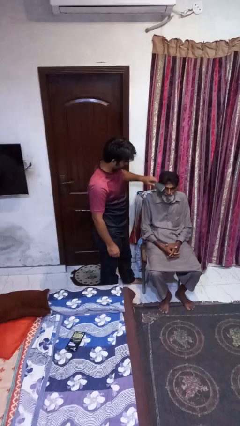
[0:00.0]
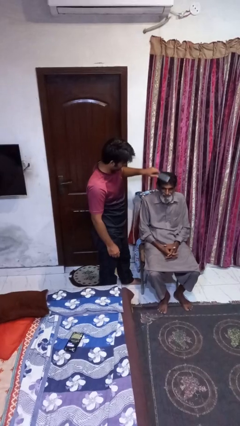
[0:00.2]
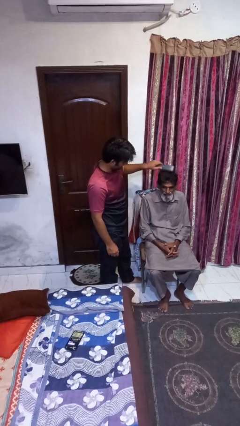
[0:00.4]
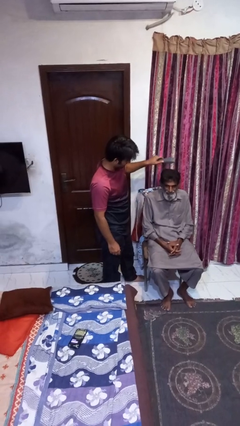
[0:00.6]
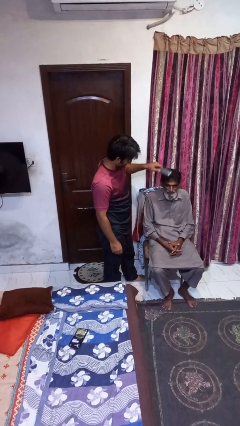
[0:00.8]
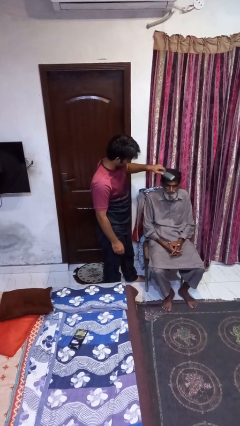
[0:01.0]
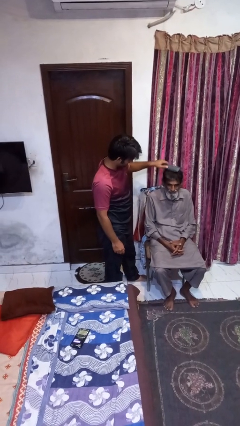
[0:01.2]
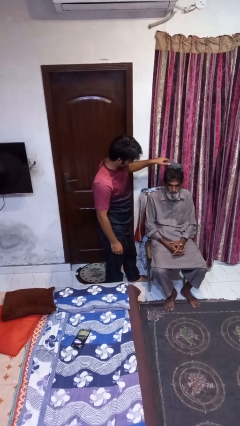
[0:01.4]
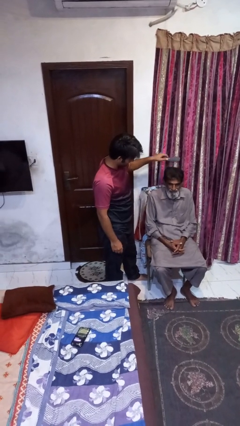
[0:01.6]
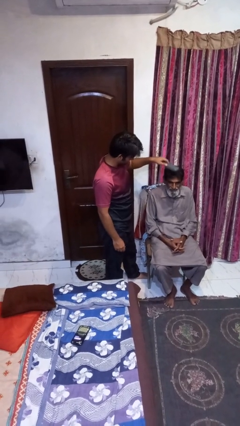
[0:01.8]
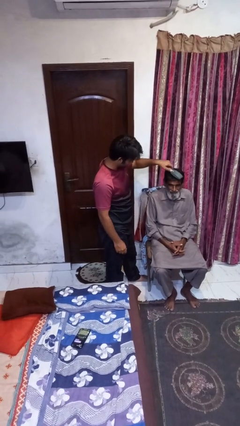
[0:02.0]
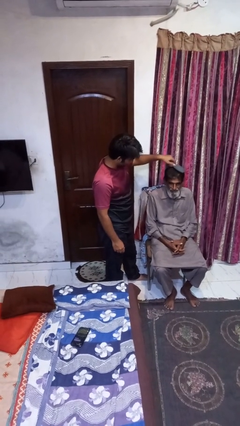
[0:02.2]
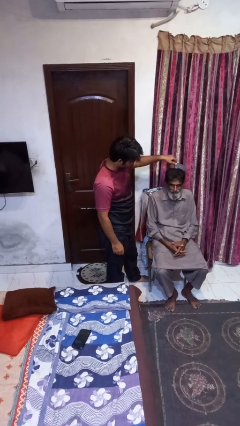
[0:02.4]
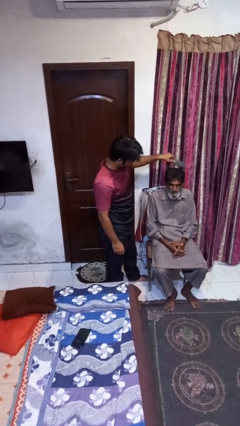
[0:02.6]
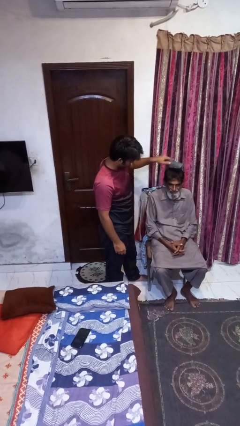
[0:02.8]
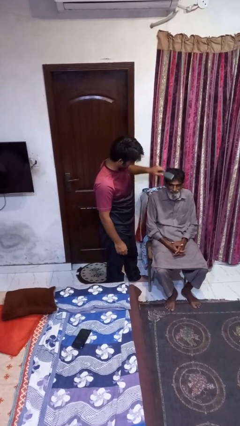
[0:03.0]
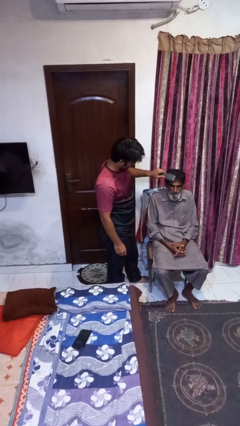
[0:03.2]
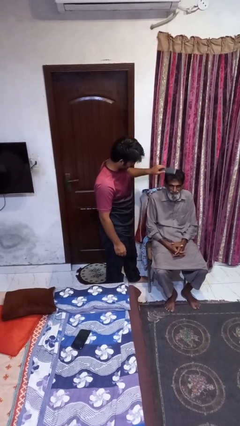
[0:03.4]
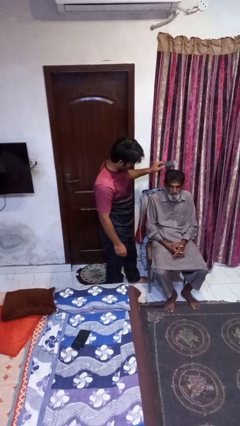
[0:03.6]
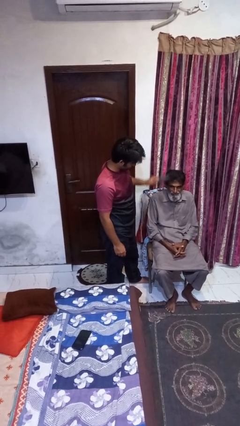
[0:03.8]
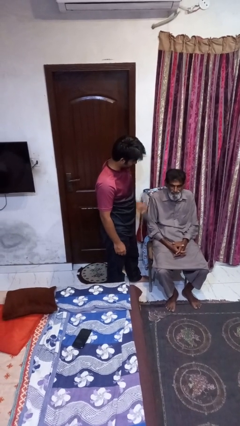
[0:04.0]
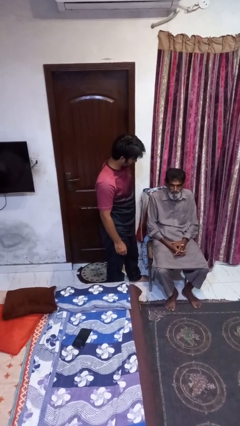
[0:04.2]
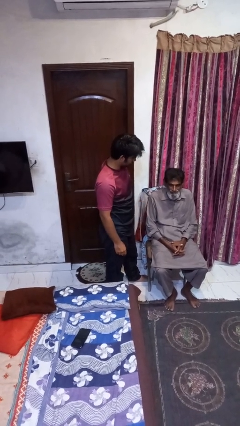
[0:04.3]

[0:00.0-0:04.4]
person brushes hair of person

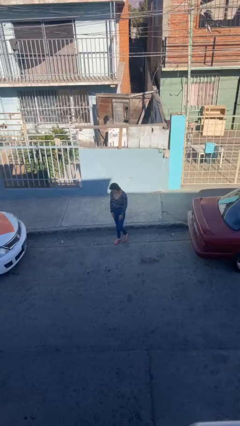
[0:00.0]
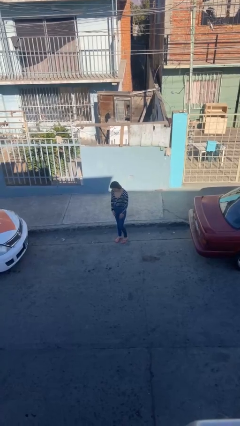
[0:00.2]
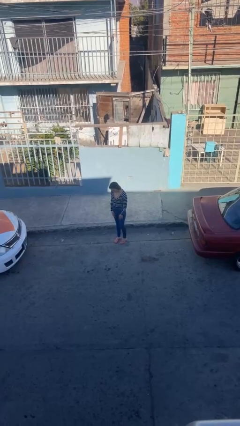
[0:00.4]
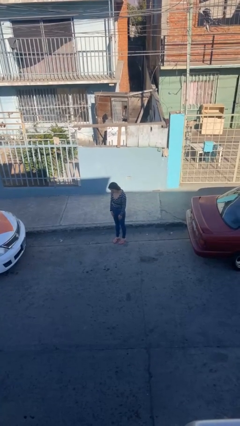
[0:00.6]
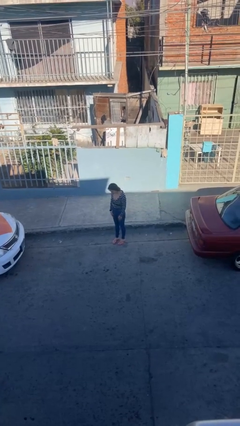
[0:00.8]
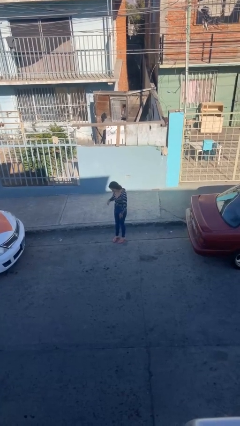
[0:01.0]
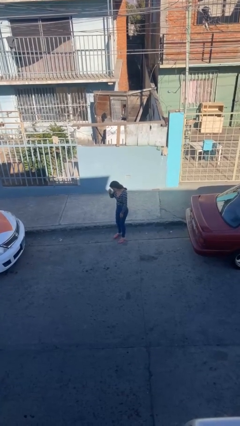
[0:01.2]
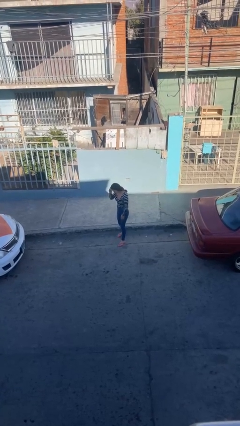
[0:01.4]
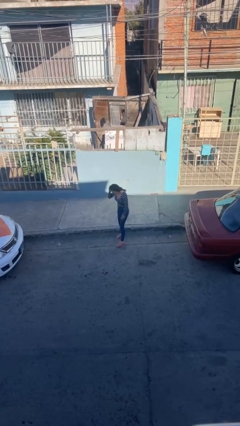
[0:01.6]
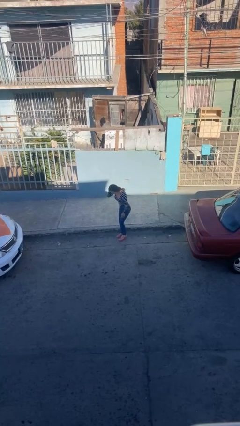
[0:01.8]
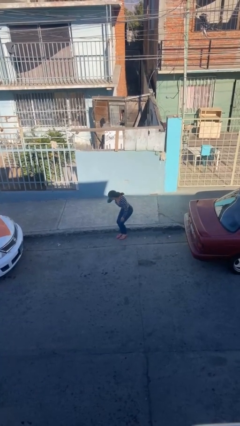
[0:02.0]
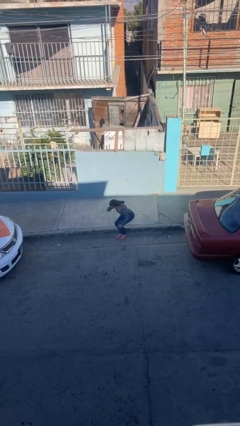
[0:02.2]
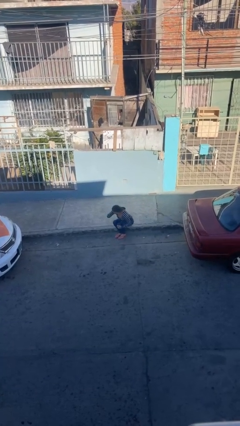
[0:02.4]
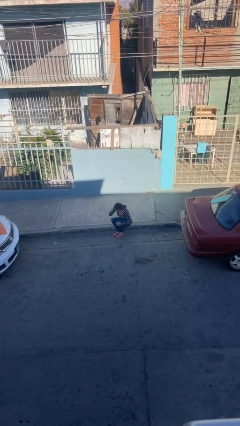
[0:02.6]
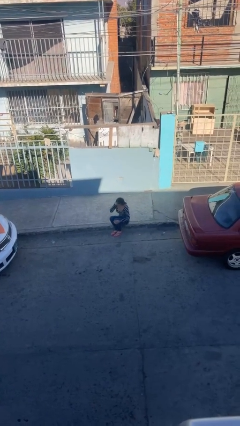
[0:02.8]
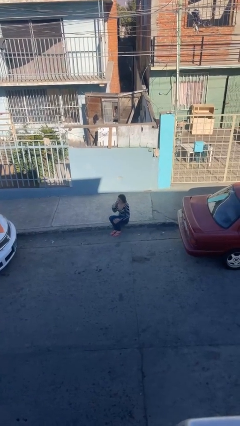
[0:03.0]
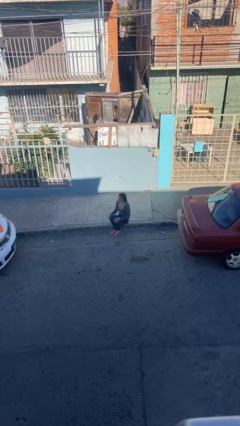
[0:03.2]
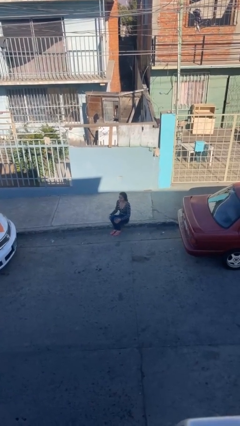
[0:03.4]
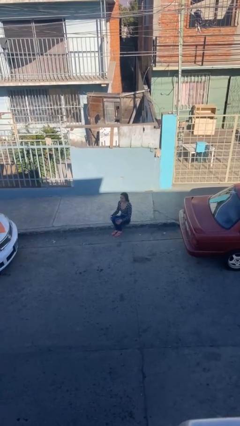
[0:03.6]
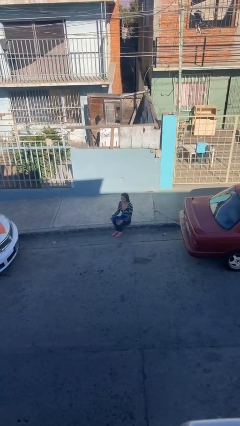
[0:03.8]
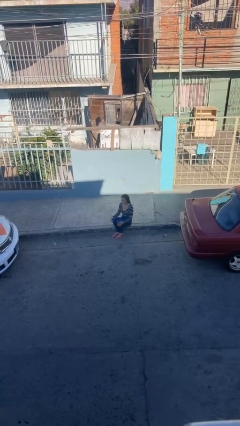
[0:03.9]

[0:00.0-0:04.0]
person sits down

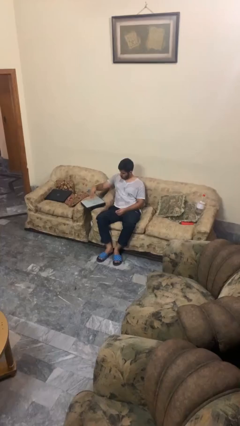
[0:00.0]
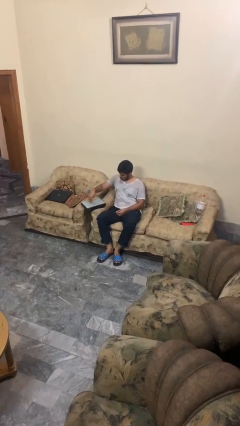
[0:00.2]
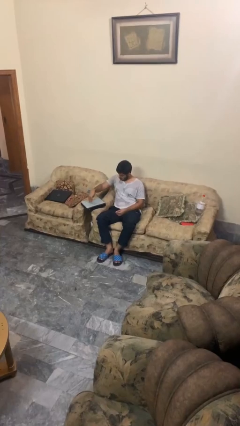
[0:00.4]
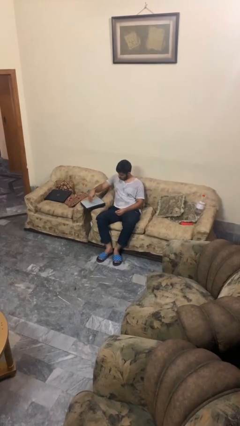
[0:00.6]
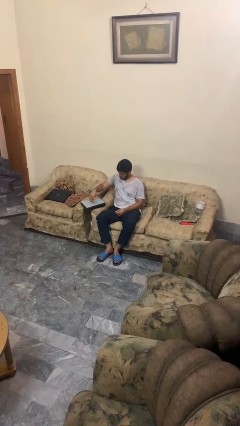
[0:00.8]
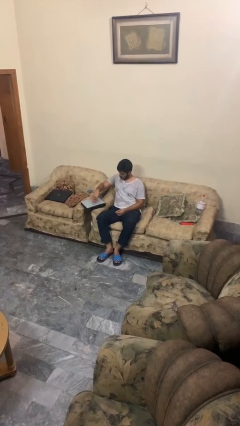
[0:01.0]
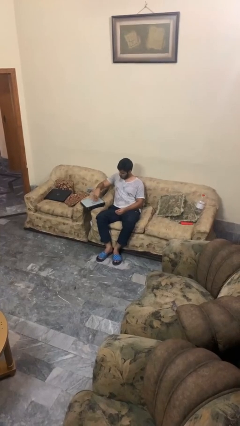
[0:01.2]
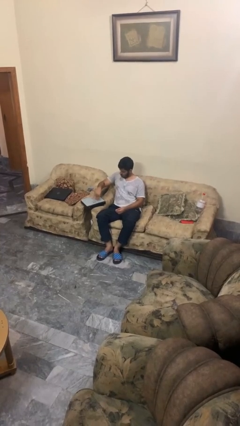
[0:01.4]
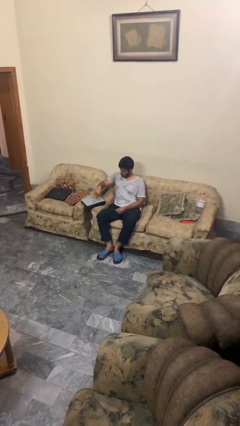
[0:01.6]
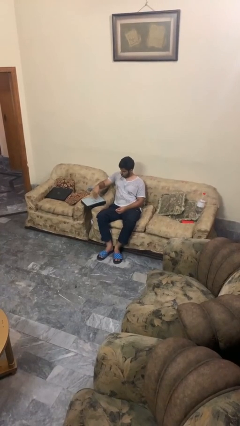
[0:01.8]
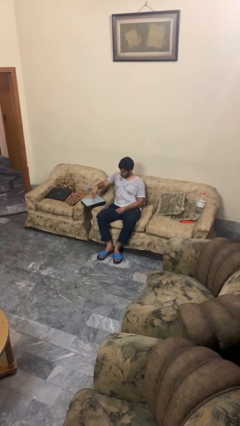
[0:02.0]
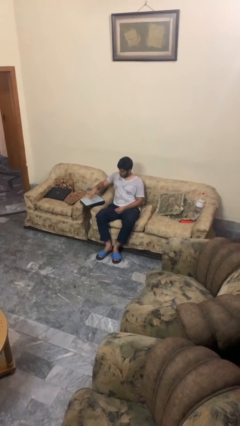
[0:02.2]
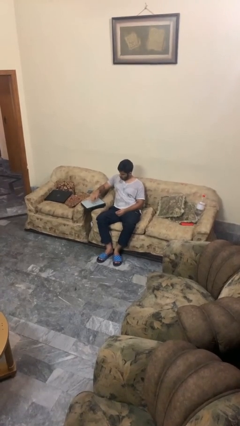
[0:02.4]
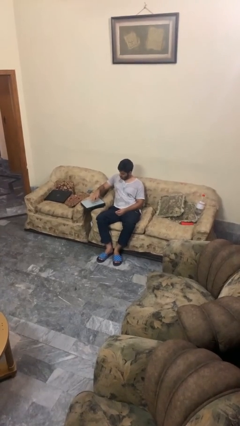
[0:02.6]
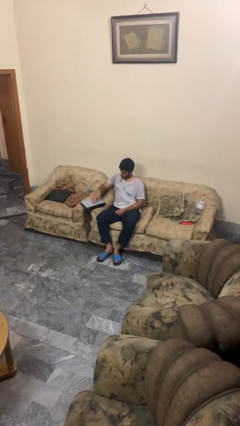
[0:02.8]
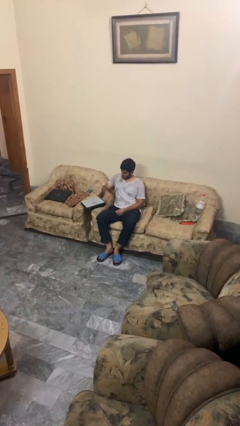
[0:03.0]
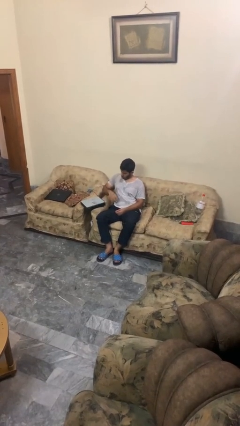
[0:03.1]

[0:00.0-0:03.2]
person taps object with finger

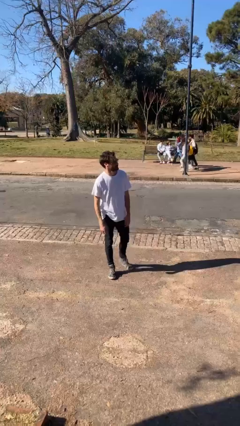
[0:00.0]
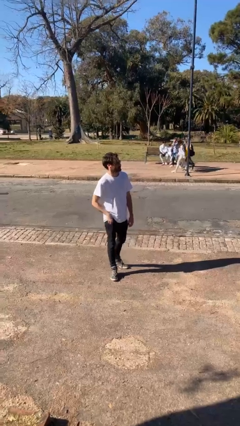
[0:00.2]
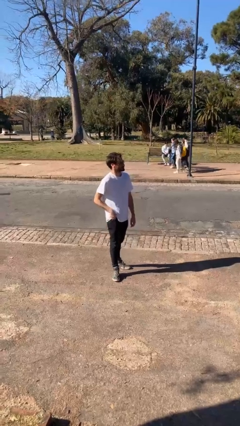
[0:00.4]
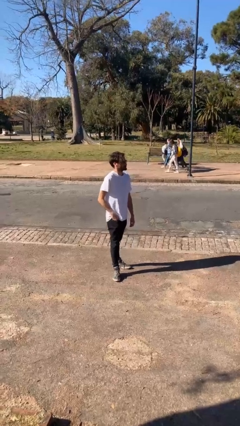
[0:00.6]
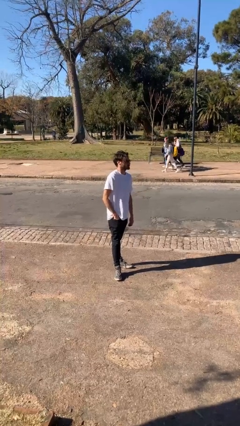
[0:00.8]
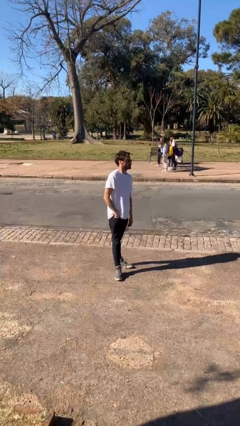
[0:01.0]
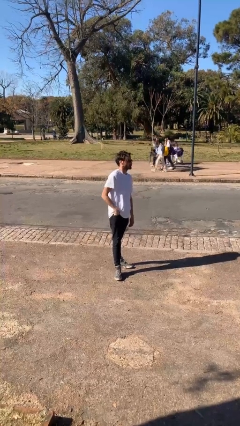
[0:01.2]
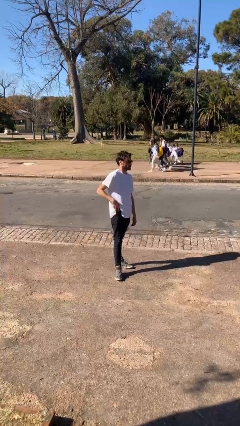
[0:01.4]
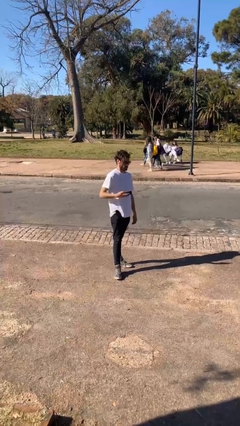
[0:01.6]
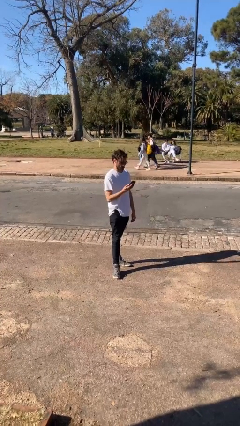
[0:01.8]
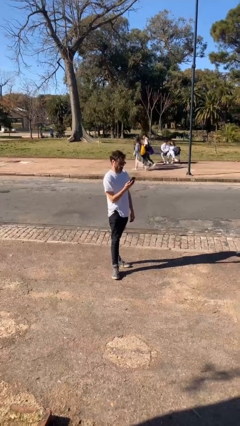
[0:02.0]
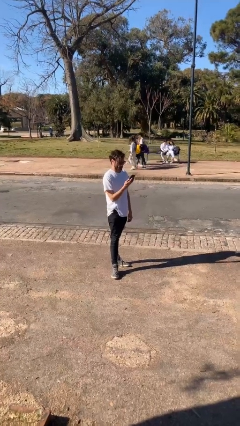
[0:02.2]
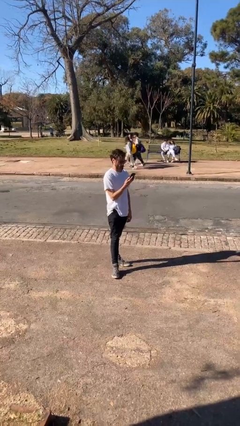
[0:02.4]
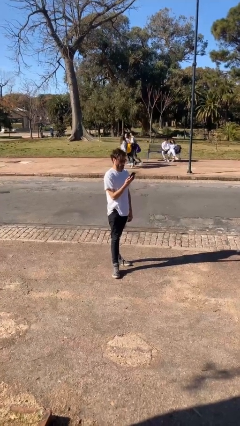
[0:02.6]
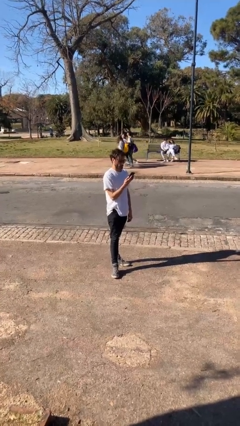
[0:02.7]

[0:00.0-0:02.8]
person takes phone from pocket

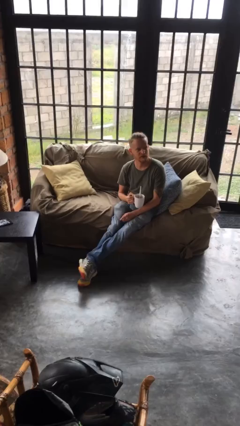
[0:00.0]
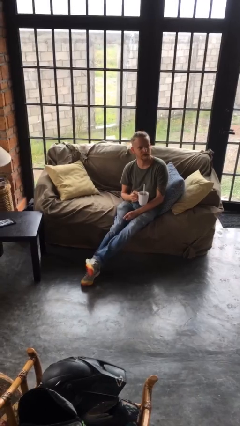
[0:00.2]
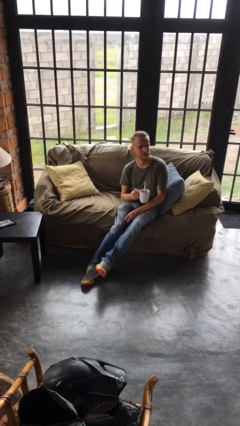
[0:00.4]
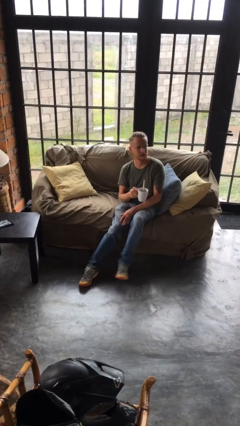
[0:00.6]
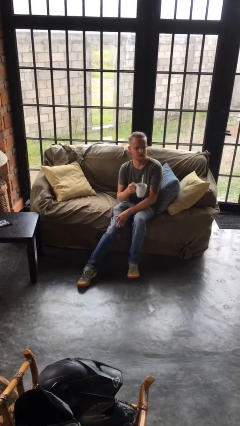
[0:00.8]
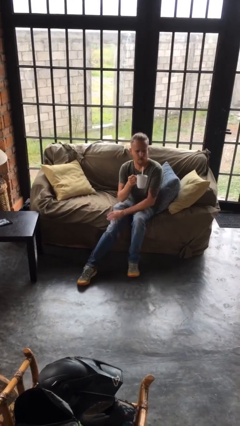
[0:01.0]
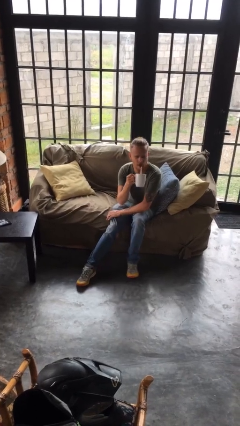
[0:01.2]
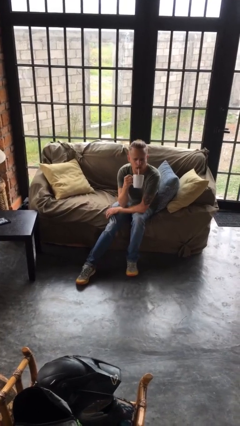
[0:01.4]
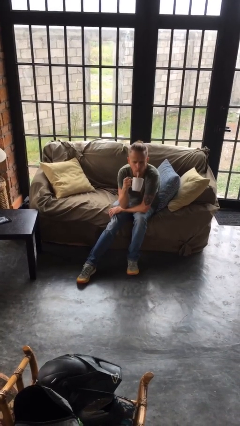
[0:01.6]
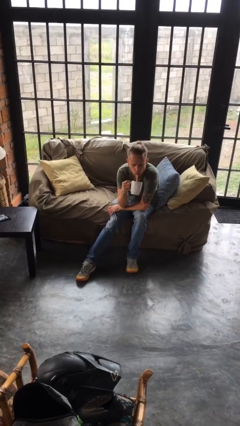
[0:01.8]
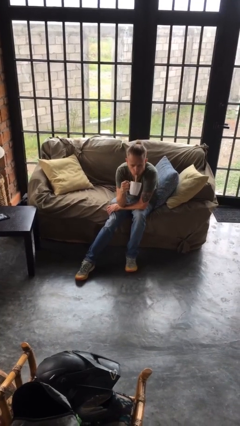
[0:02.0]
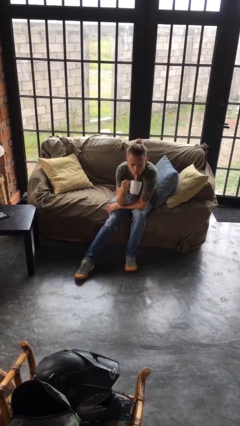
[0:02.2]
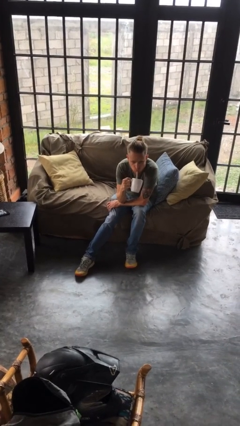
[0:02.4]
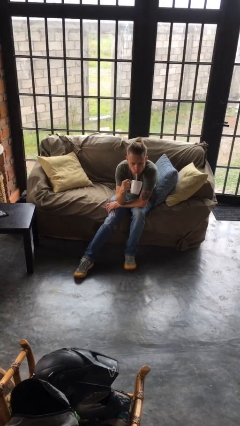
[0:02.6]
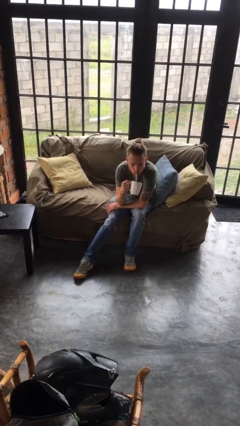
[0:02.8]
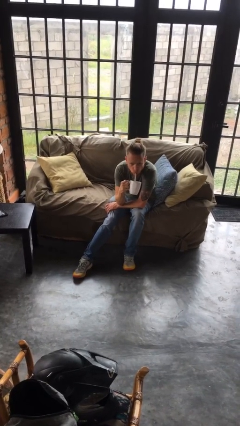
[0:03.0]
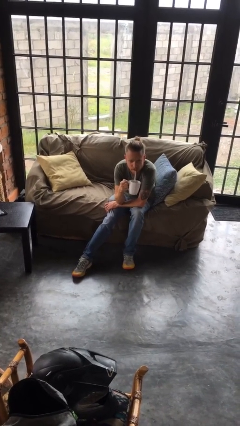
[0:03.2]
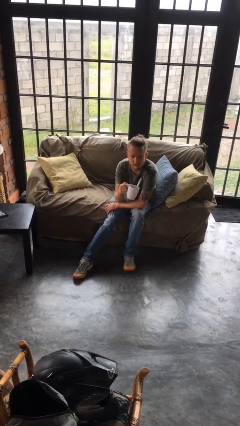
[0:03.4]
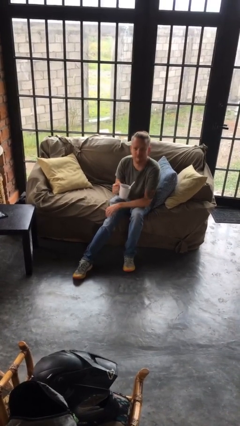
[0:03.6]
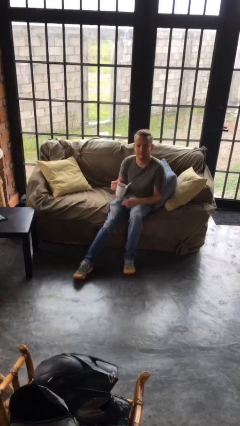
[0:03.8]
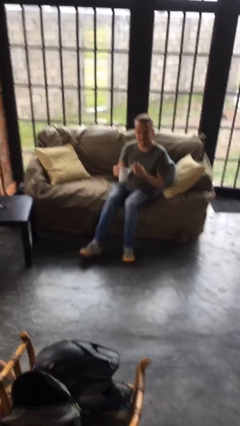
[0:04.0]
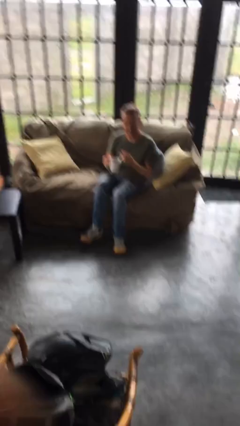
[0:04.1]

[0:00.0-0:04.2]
person drinks from straw
